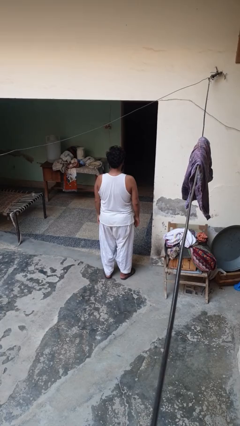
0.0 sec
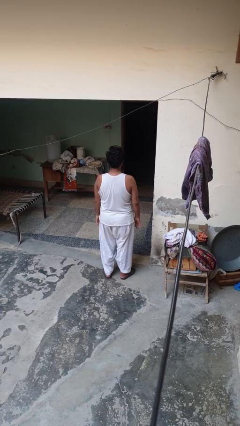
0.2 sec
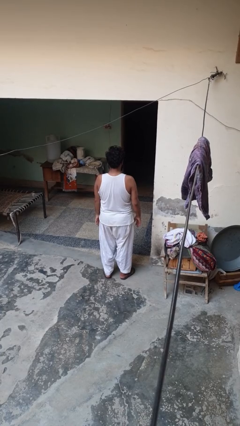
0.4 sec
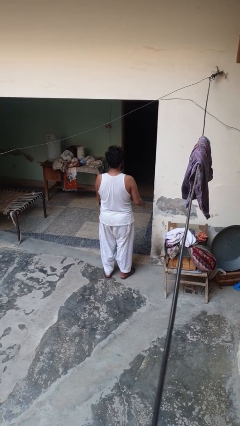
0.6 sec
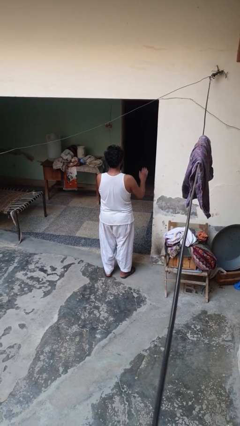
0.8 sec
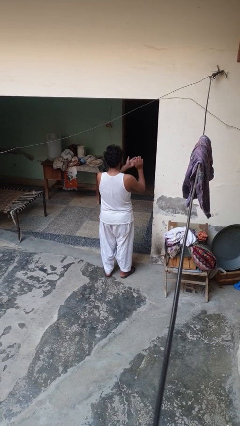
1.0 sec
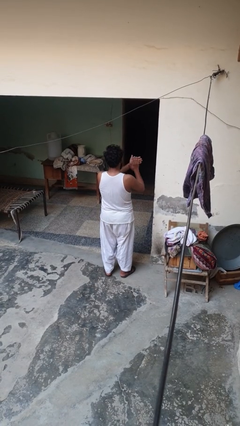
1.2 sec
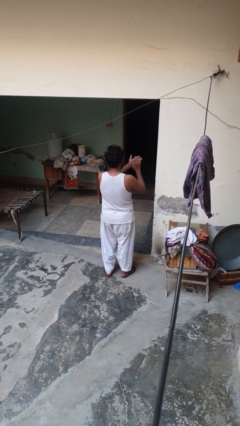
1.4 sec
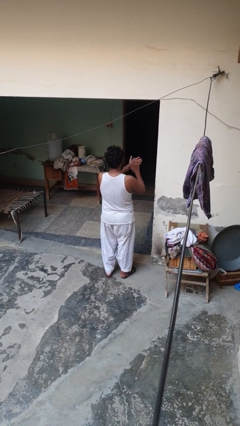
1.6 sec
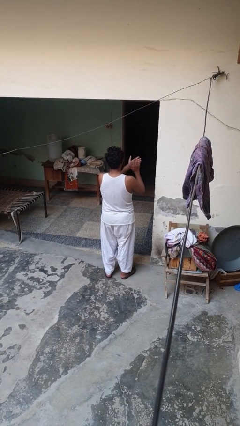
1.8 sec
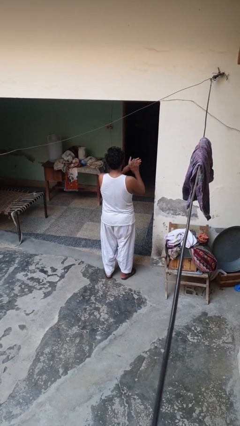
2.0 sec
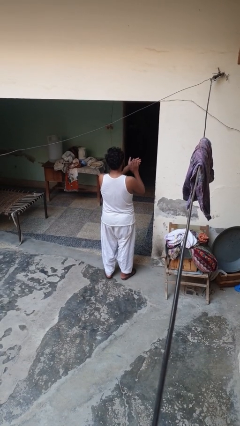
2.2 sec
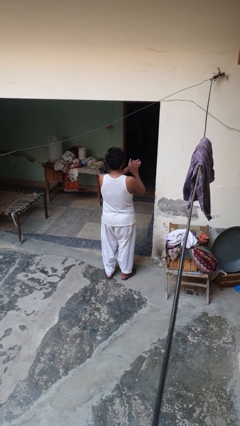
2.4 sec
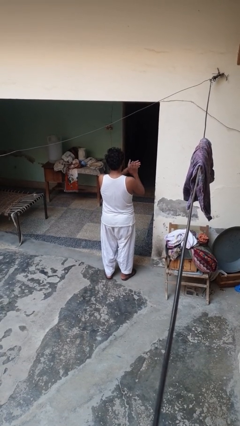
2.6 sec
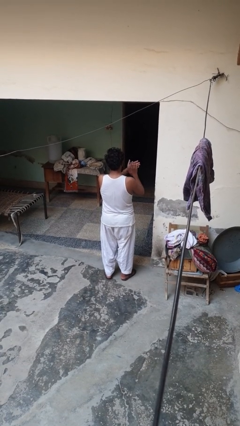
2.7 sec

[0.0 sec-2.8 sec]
person claps hands

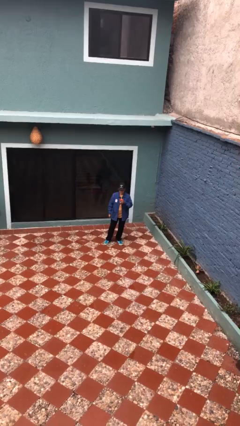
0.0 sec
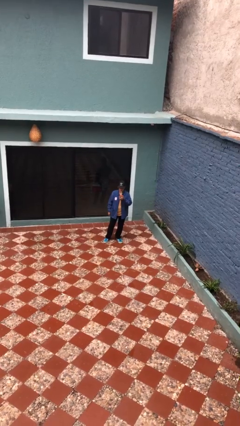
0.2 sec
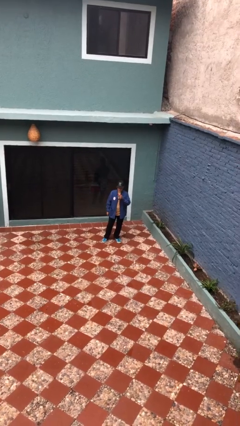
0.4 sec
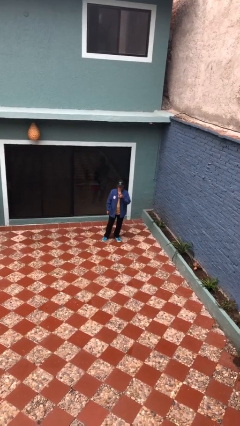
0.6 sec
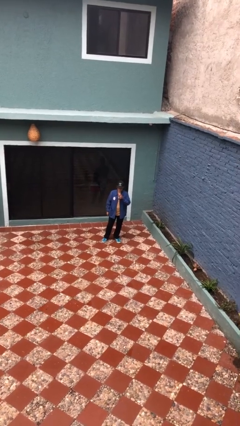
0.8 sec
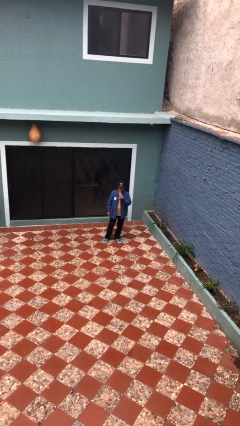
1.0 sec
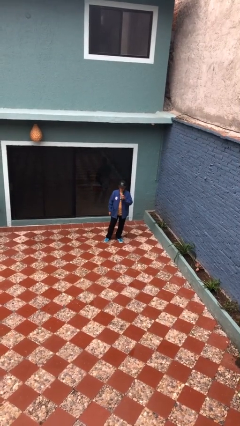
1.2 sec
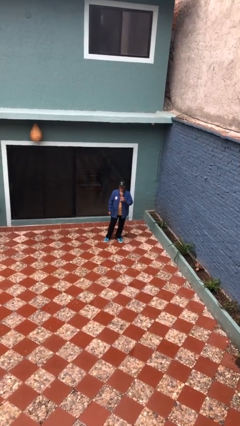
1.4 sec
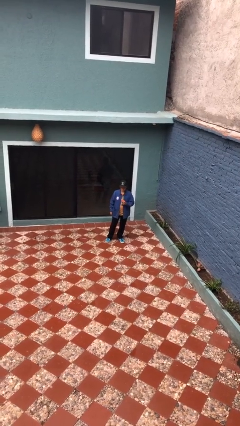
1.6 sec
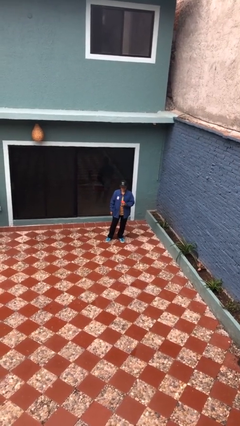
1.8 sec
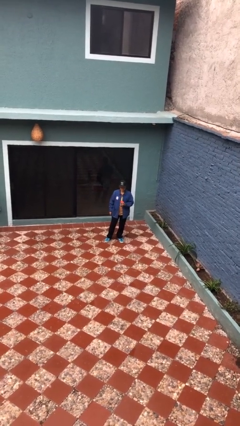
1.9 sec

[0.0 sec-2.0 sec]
person drinks from straw

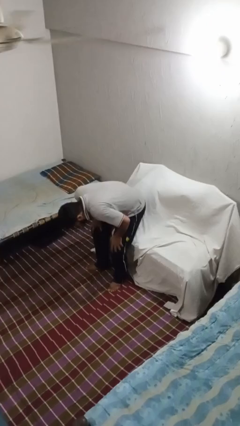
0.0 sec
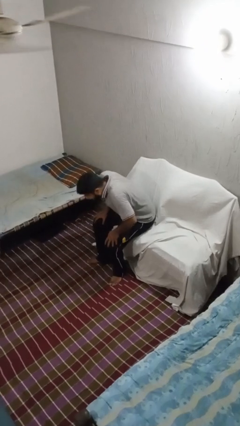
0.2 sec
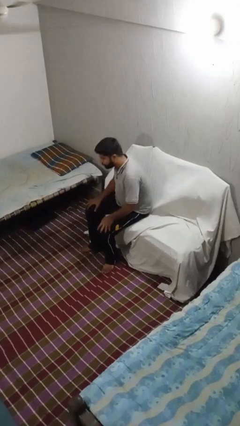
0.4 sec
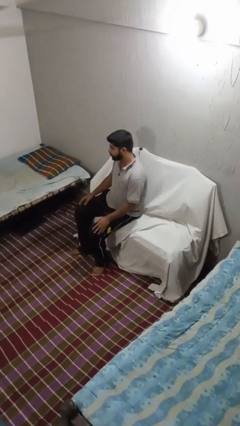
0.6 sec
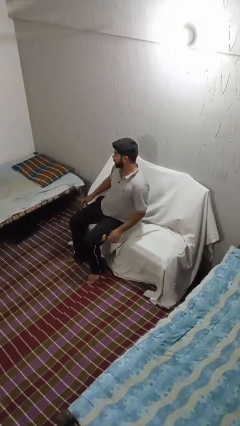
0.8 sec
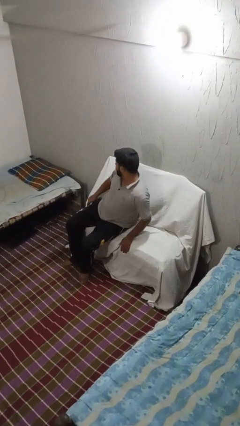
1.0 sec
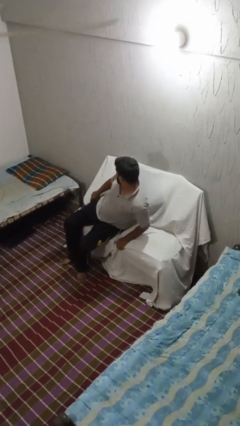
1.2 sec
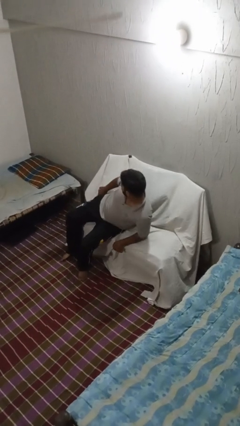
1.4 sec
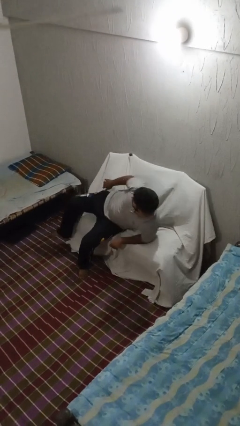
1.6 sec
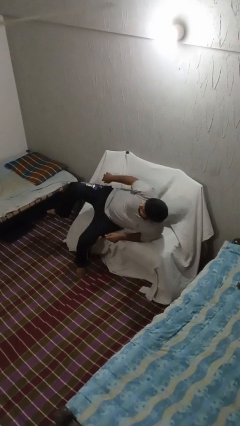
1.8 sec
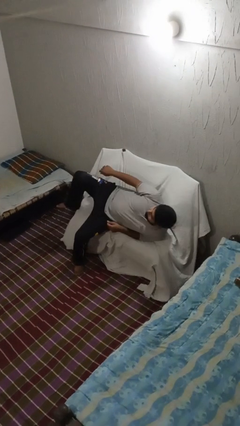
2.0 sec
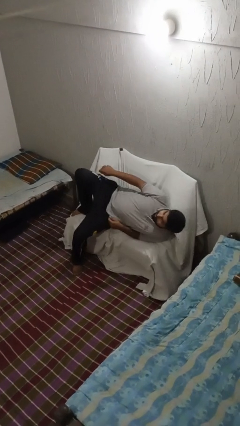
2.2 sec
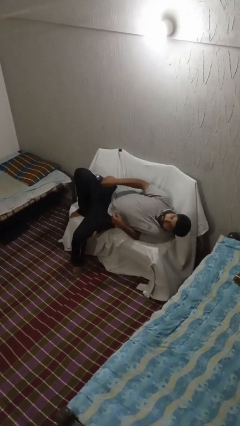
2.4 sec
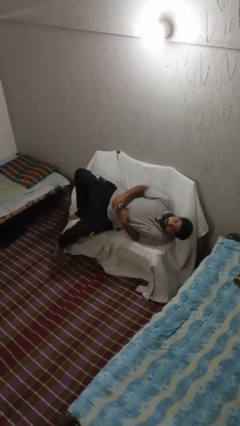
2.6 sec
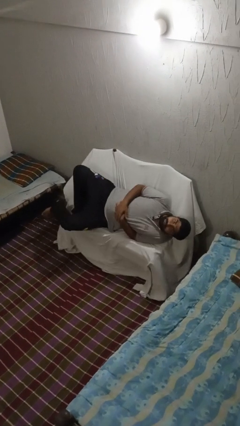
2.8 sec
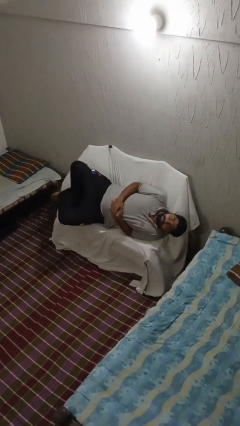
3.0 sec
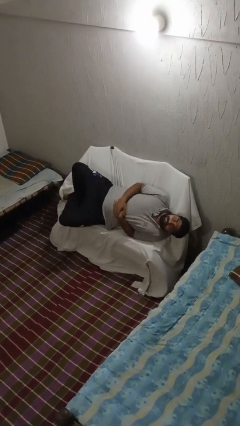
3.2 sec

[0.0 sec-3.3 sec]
person lies down on couch

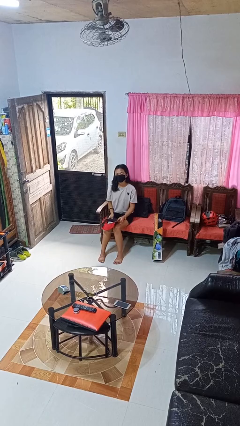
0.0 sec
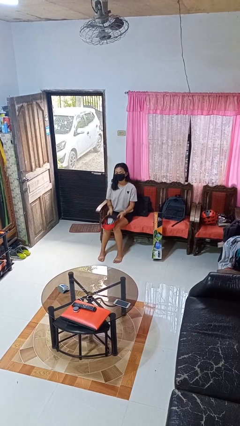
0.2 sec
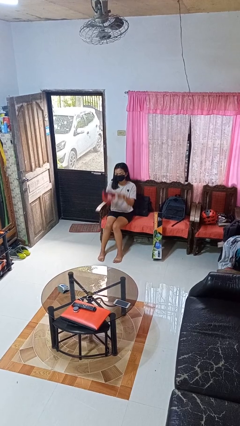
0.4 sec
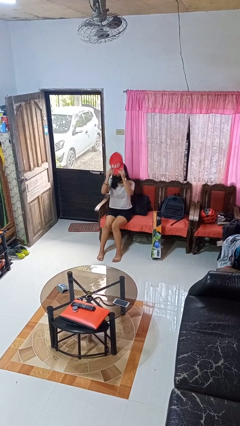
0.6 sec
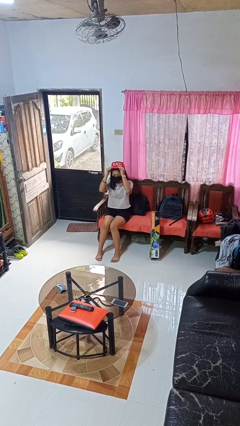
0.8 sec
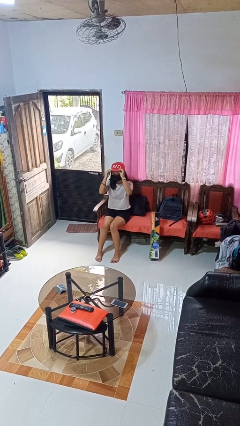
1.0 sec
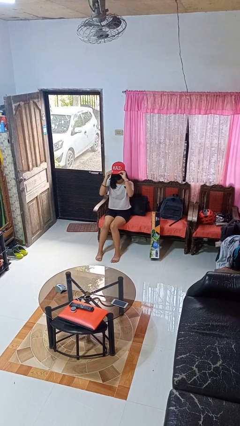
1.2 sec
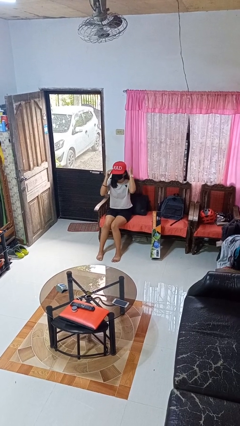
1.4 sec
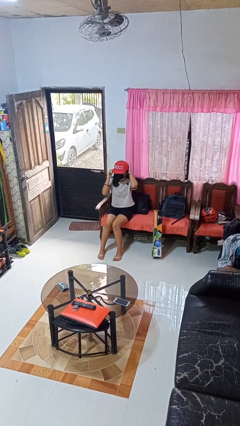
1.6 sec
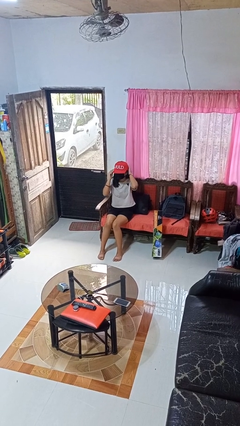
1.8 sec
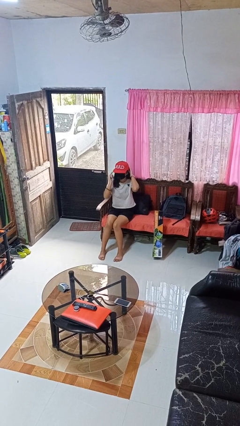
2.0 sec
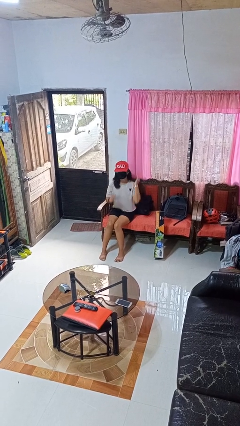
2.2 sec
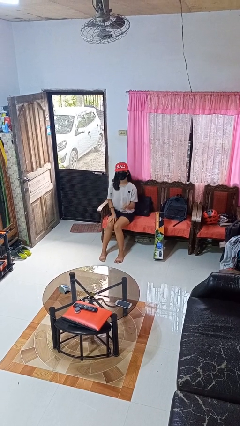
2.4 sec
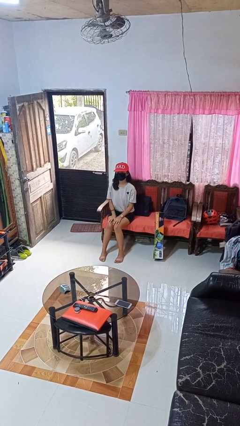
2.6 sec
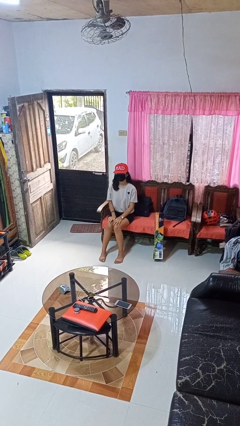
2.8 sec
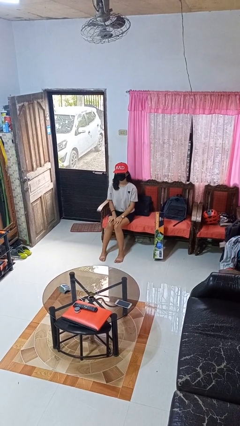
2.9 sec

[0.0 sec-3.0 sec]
person puts on hat

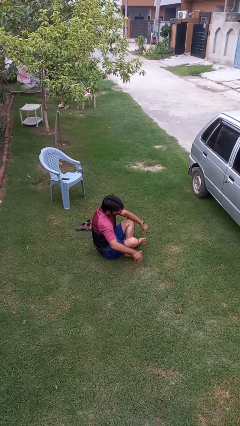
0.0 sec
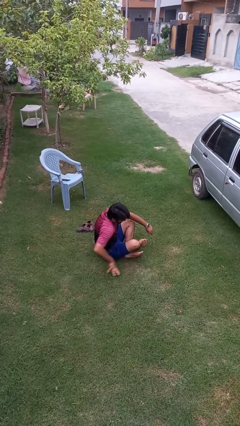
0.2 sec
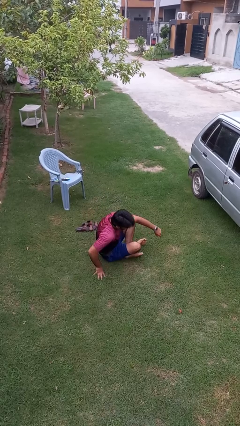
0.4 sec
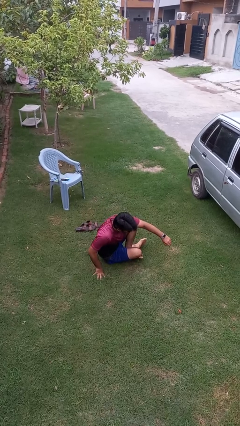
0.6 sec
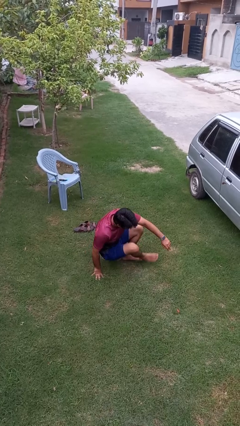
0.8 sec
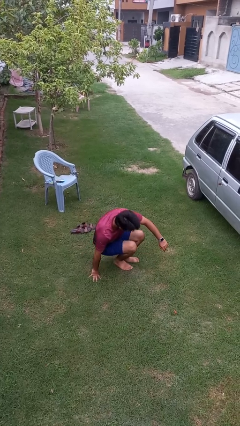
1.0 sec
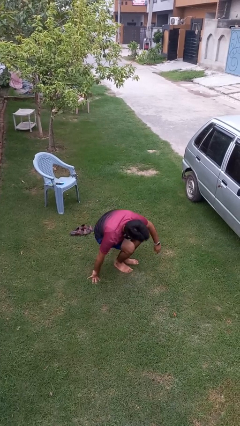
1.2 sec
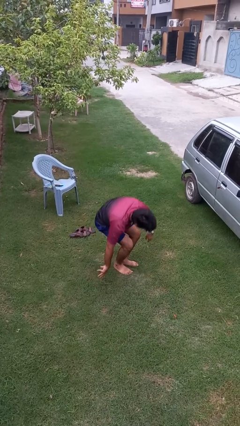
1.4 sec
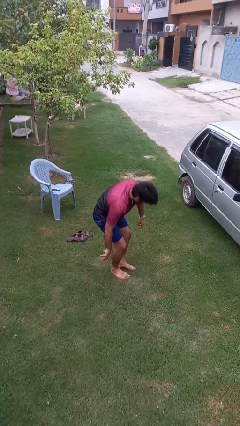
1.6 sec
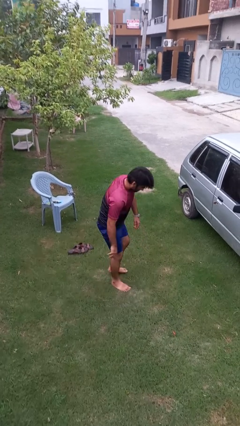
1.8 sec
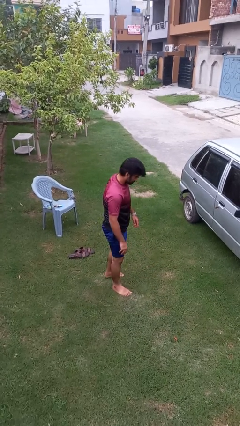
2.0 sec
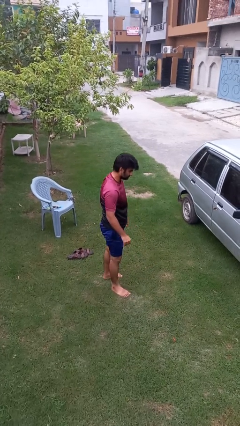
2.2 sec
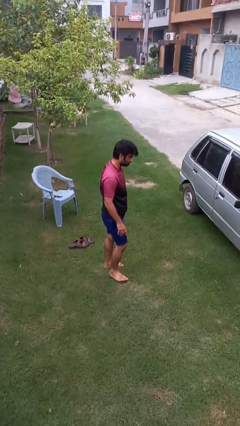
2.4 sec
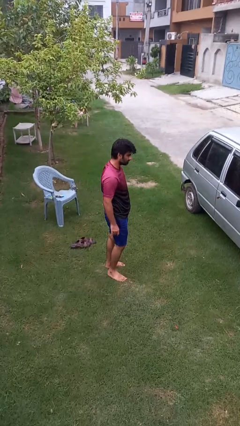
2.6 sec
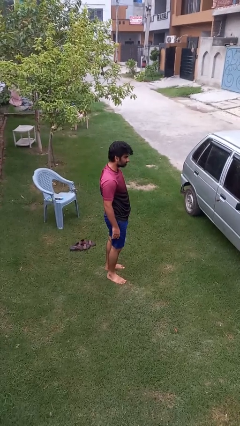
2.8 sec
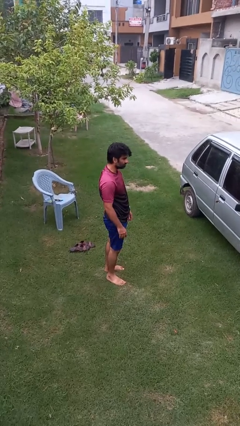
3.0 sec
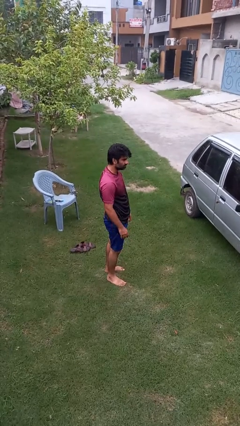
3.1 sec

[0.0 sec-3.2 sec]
person stands up from floor

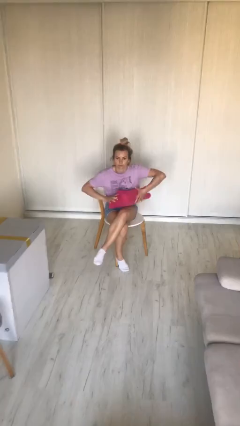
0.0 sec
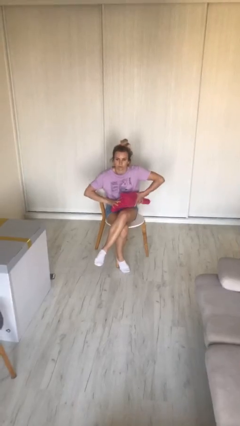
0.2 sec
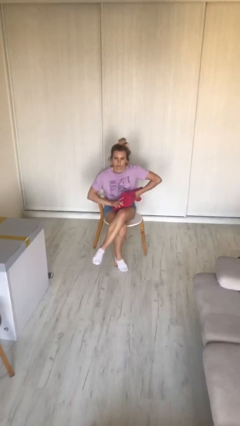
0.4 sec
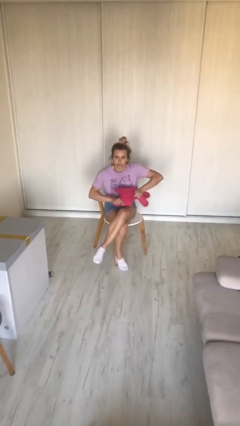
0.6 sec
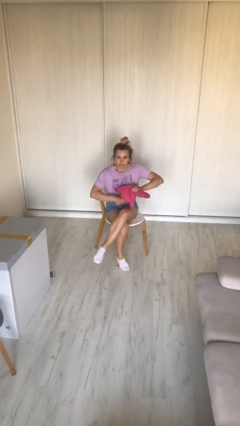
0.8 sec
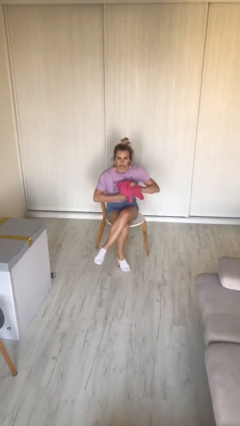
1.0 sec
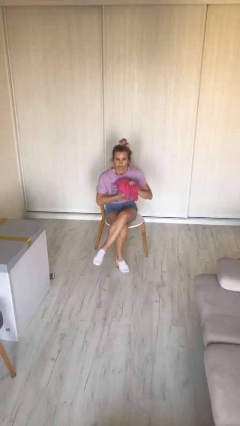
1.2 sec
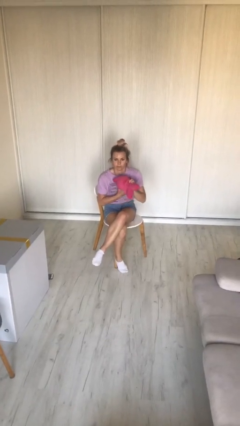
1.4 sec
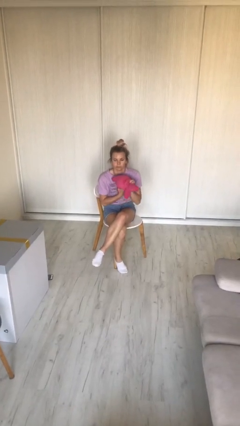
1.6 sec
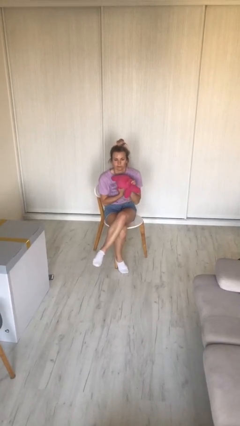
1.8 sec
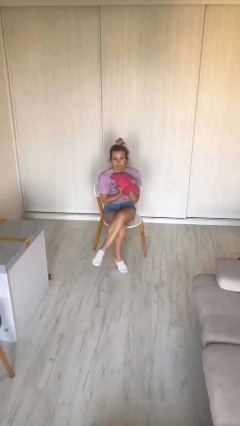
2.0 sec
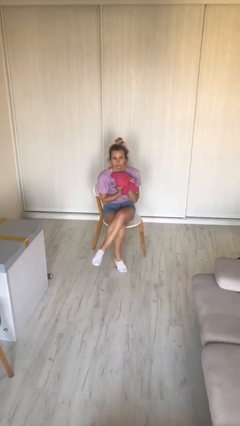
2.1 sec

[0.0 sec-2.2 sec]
person squeezes object

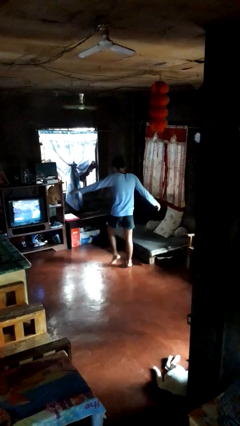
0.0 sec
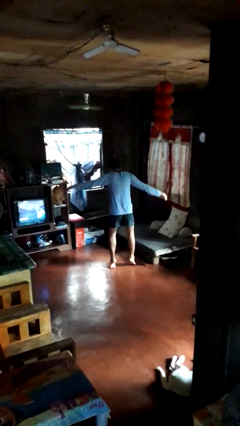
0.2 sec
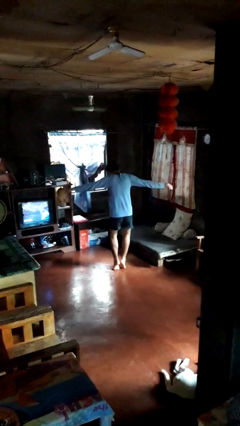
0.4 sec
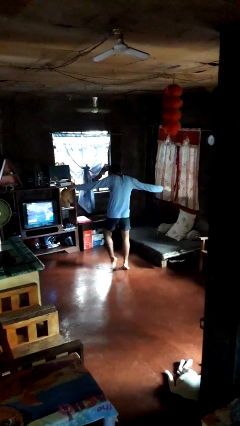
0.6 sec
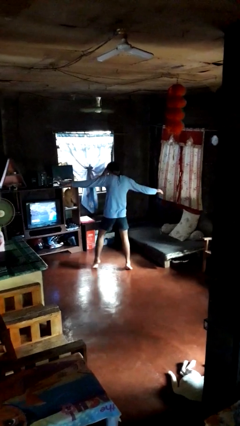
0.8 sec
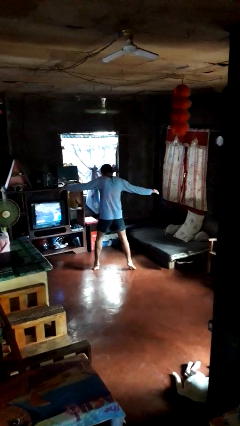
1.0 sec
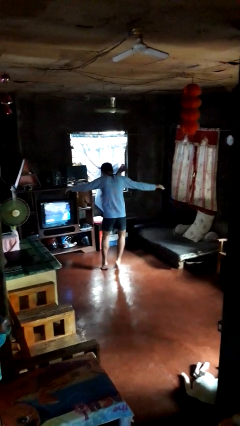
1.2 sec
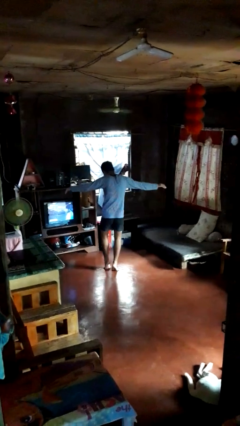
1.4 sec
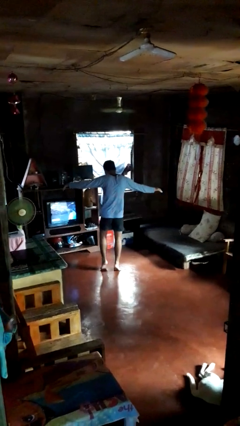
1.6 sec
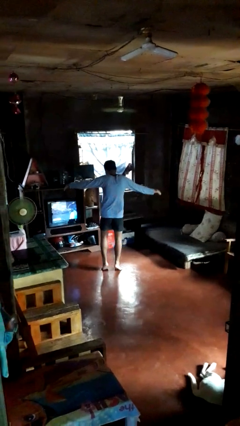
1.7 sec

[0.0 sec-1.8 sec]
person walks tiptoe
